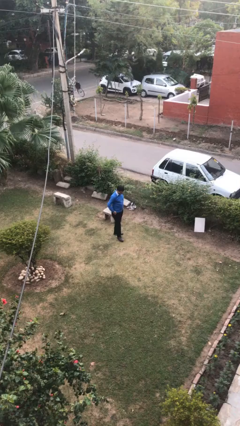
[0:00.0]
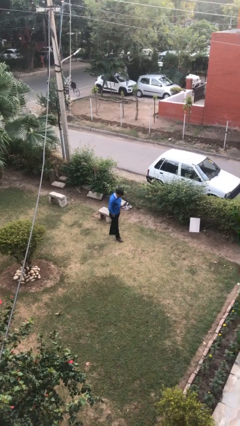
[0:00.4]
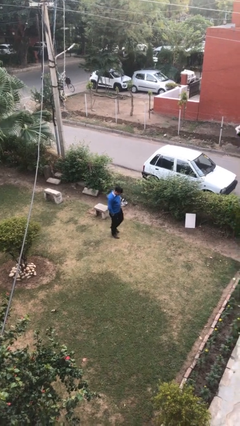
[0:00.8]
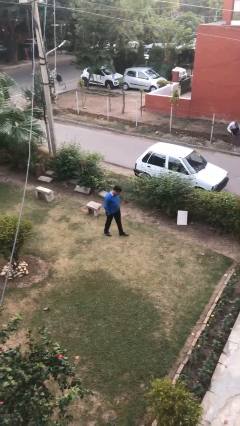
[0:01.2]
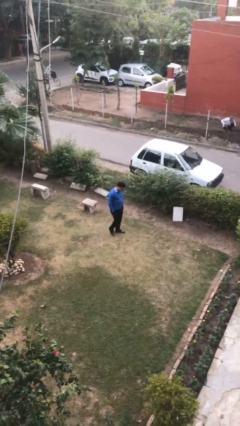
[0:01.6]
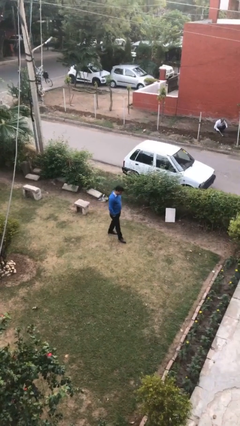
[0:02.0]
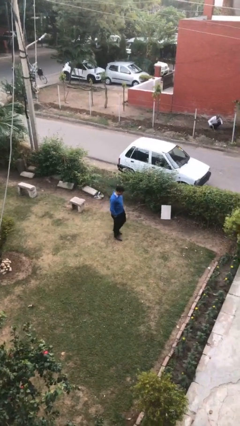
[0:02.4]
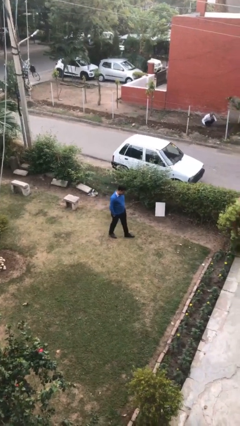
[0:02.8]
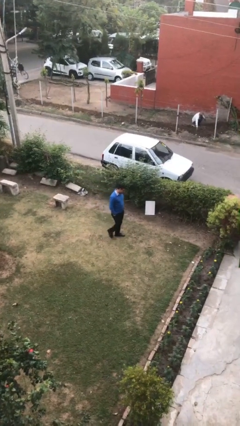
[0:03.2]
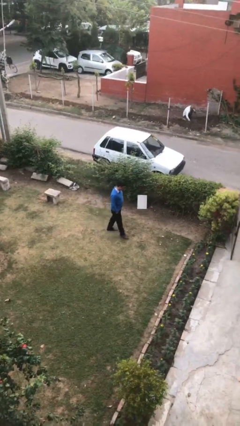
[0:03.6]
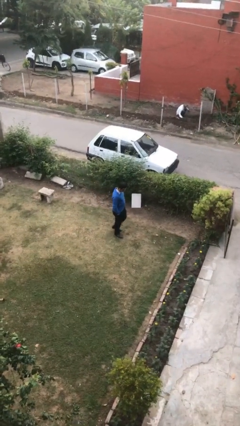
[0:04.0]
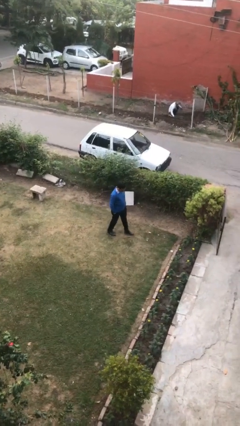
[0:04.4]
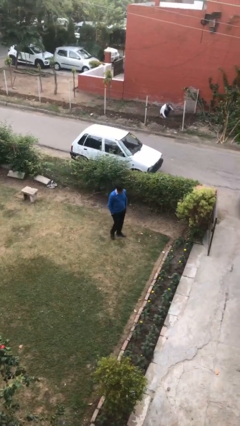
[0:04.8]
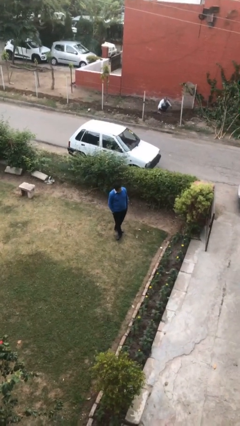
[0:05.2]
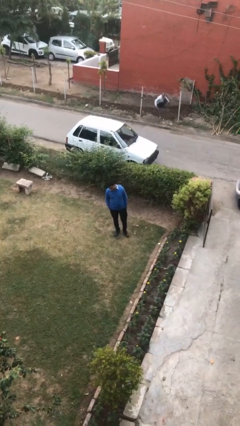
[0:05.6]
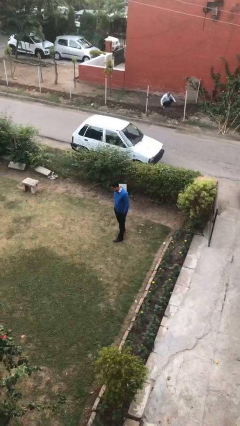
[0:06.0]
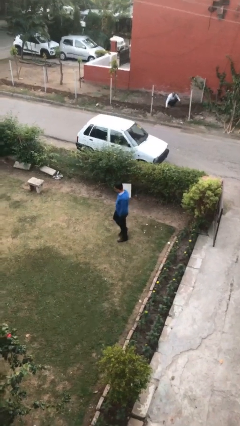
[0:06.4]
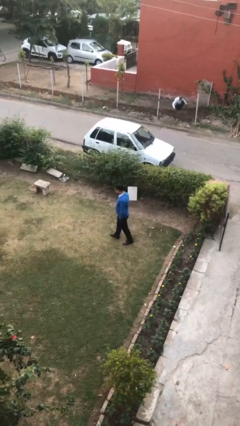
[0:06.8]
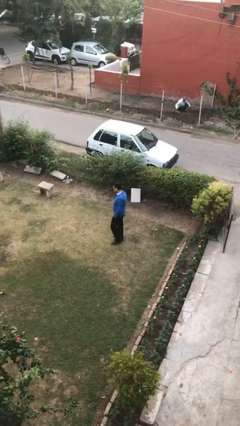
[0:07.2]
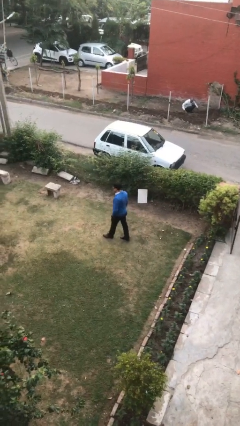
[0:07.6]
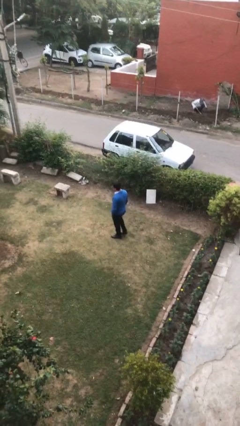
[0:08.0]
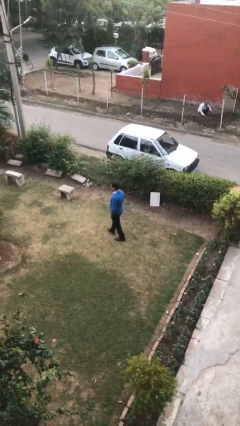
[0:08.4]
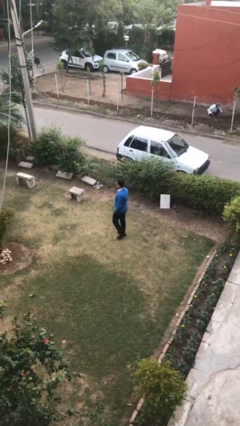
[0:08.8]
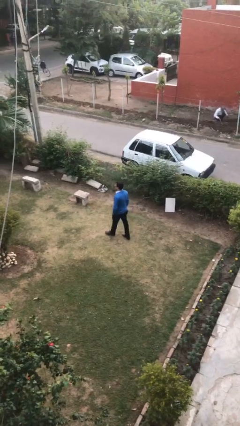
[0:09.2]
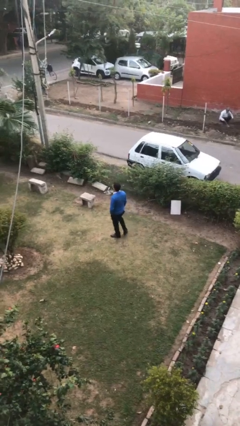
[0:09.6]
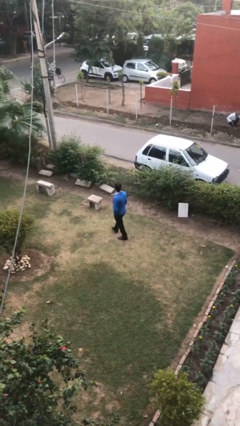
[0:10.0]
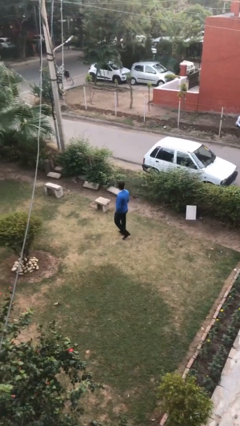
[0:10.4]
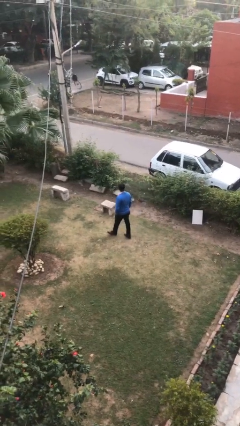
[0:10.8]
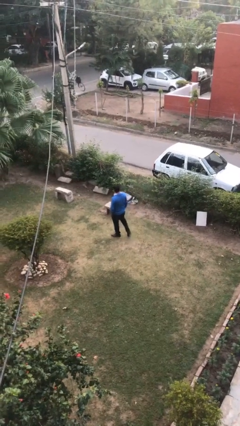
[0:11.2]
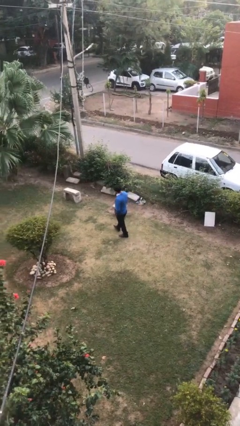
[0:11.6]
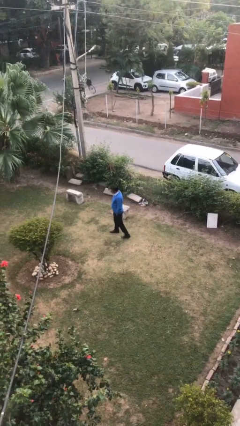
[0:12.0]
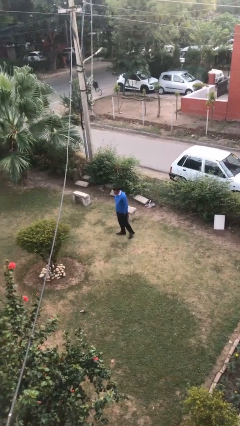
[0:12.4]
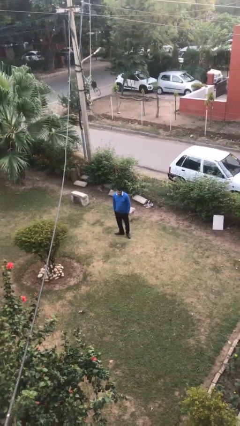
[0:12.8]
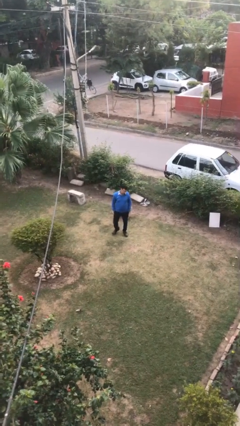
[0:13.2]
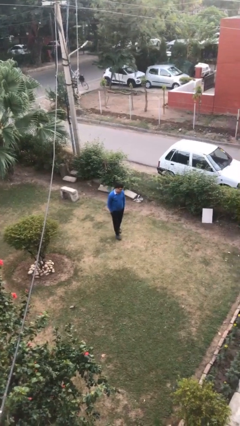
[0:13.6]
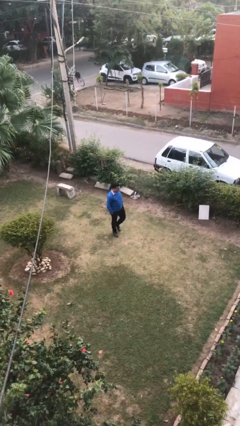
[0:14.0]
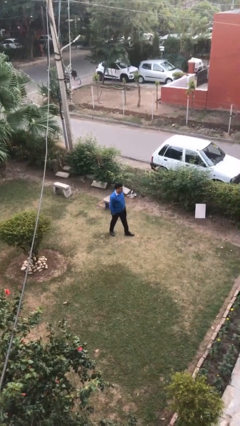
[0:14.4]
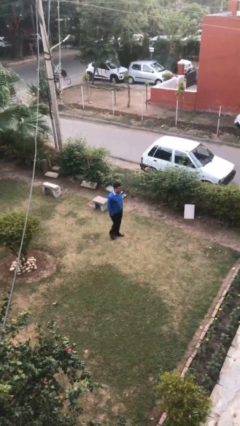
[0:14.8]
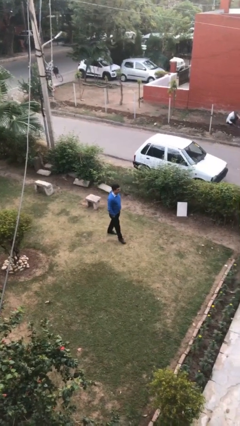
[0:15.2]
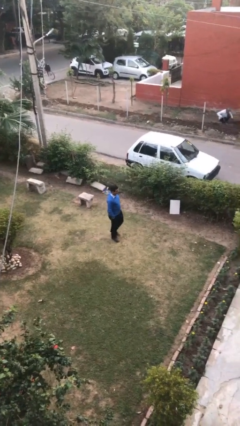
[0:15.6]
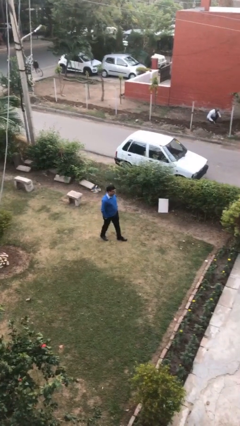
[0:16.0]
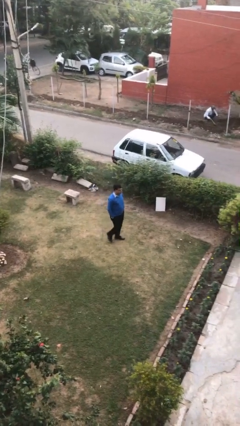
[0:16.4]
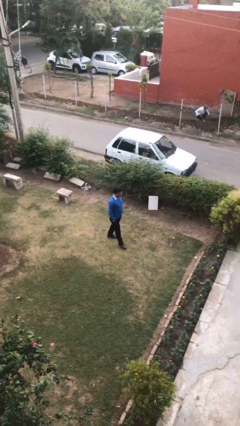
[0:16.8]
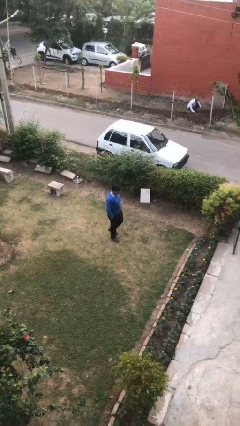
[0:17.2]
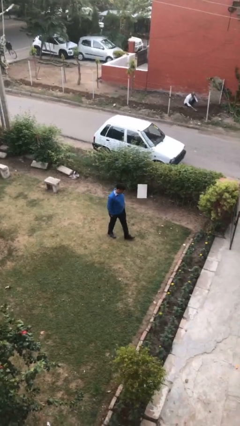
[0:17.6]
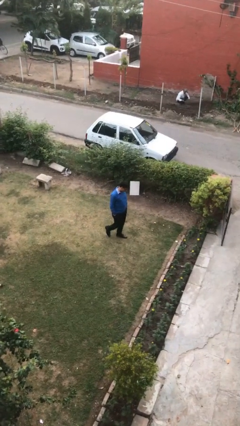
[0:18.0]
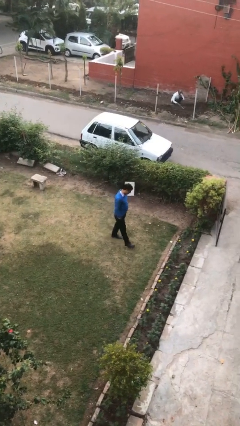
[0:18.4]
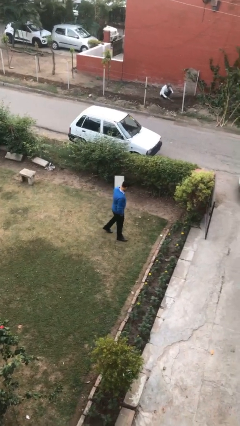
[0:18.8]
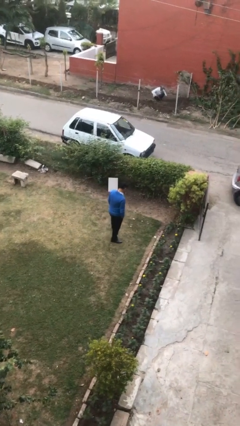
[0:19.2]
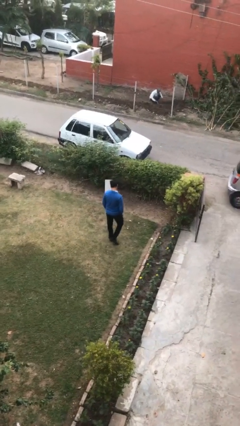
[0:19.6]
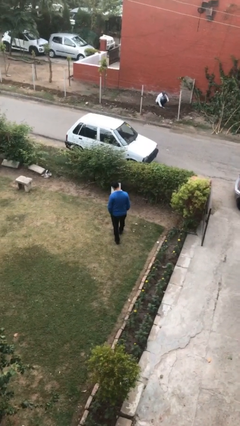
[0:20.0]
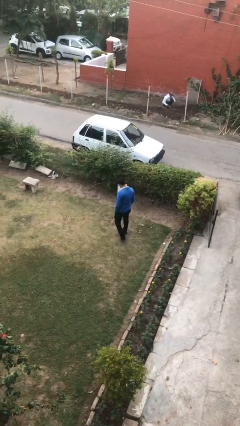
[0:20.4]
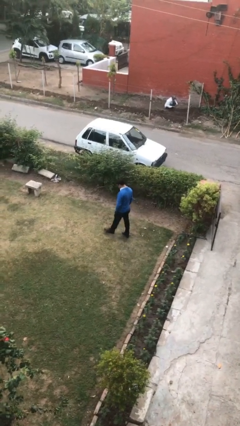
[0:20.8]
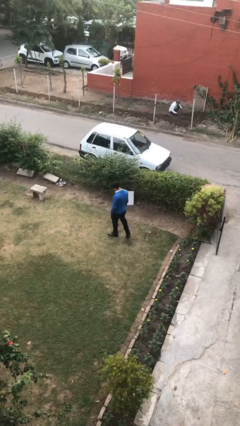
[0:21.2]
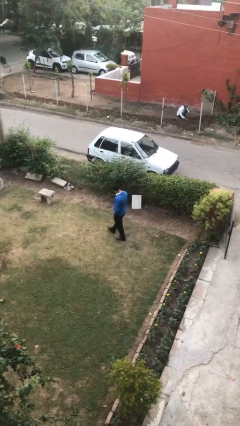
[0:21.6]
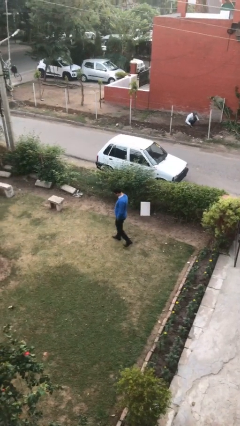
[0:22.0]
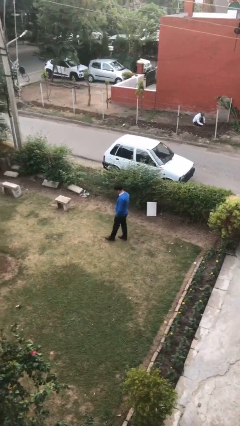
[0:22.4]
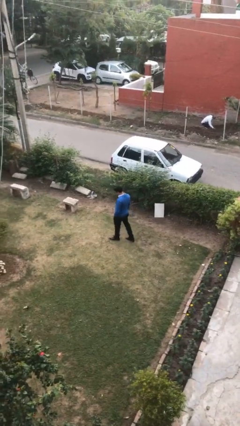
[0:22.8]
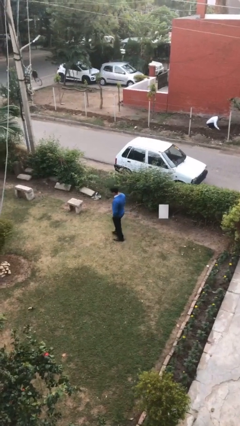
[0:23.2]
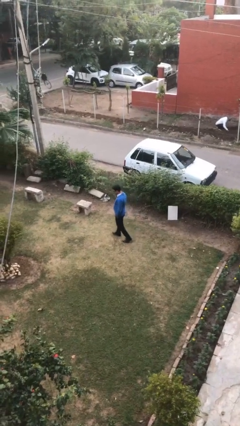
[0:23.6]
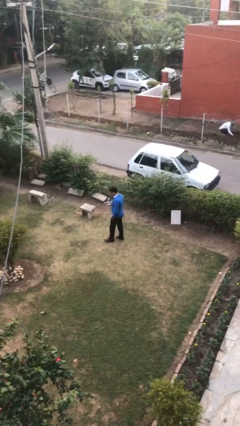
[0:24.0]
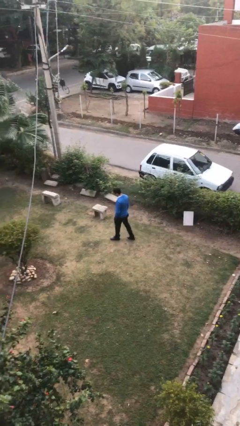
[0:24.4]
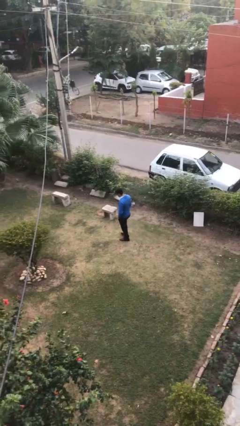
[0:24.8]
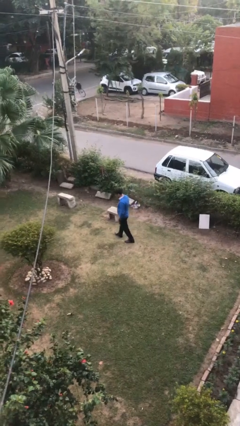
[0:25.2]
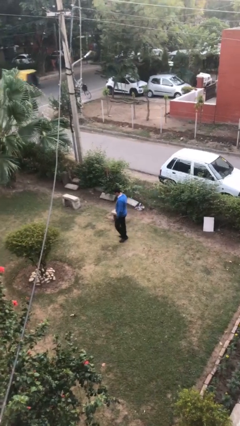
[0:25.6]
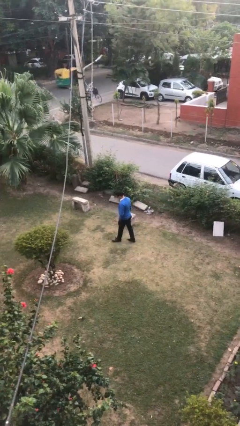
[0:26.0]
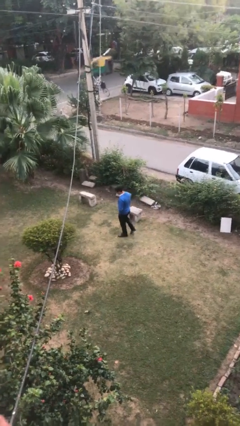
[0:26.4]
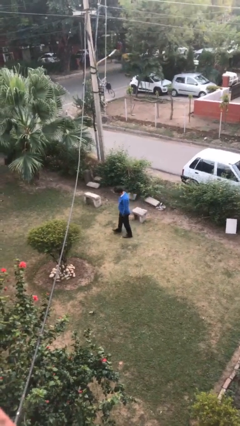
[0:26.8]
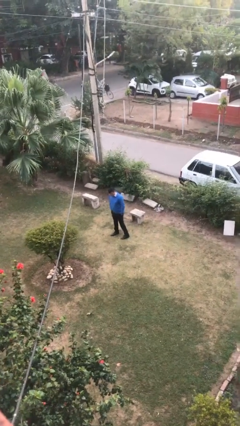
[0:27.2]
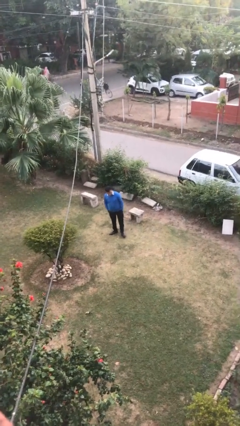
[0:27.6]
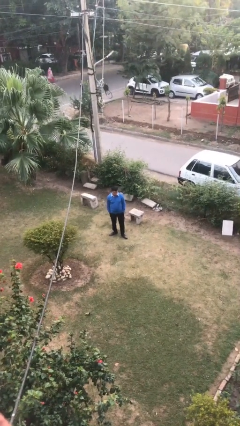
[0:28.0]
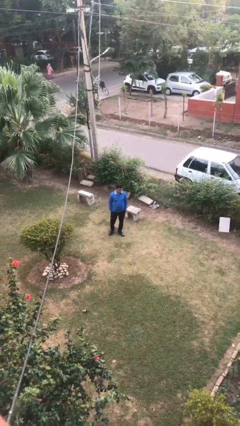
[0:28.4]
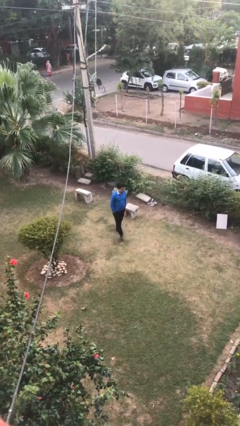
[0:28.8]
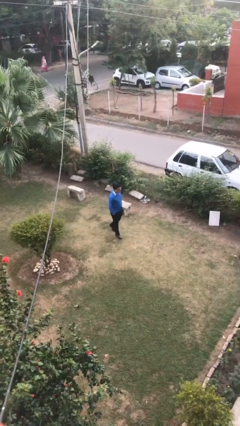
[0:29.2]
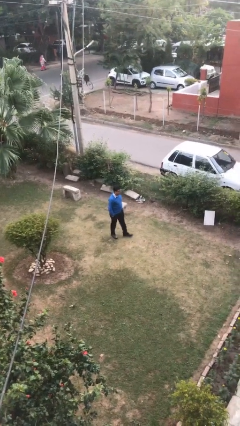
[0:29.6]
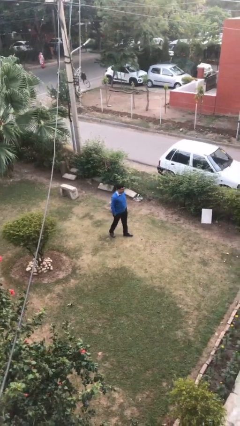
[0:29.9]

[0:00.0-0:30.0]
person walks

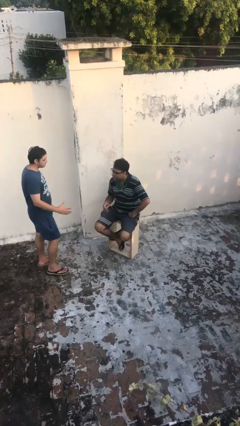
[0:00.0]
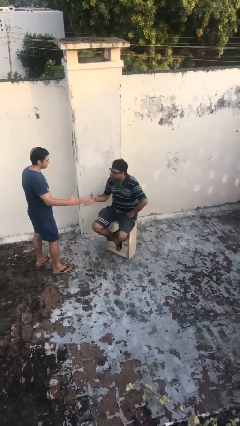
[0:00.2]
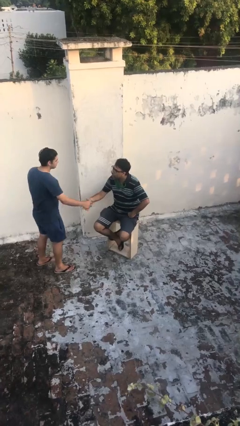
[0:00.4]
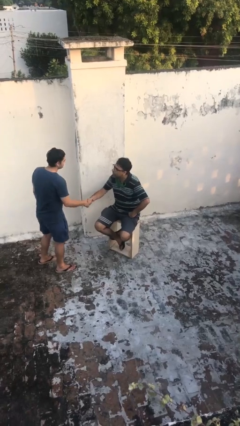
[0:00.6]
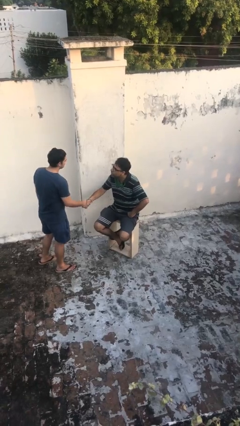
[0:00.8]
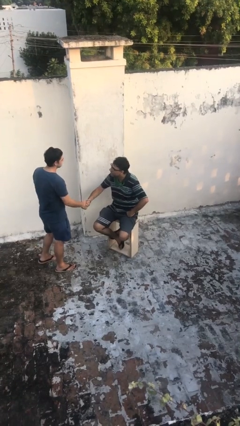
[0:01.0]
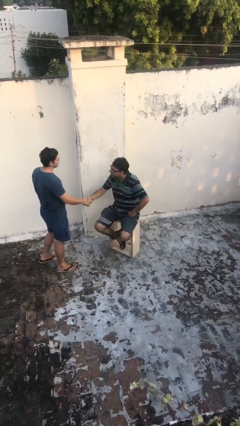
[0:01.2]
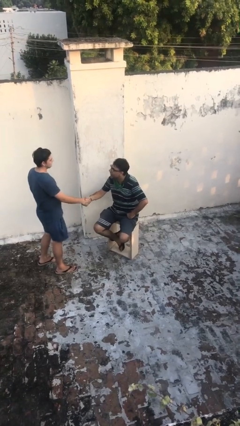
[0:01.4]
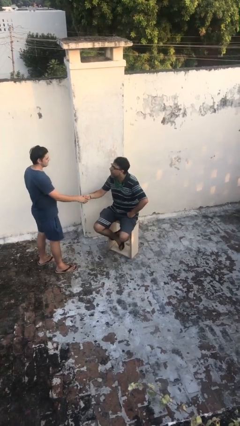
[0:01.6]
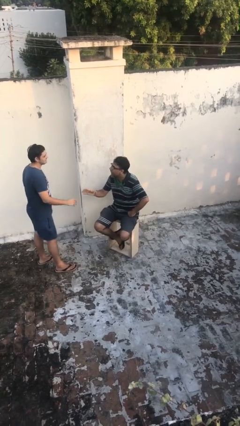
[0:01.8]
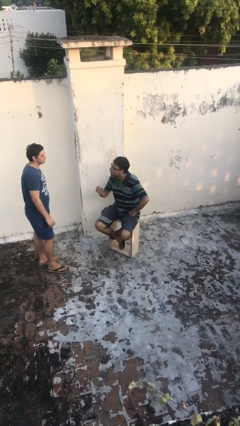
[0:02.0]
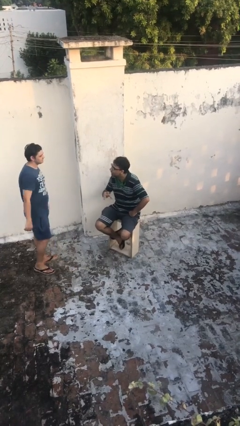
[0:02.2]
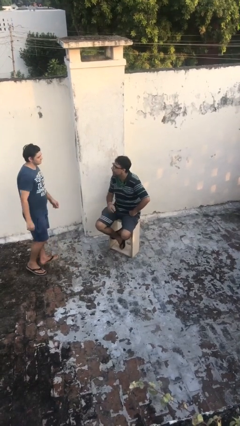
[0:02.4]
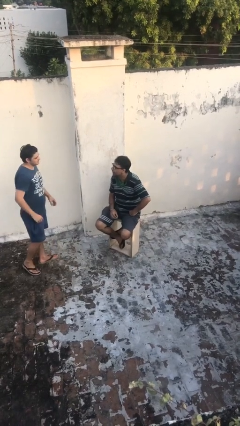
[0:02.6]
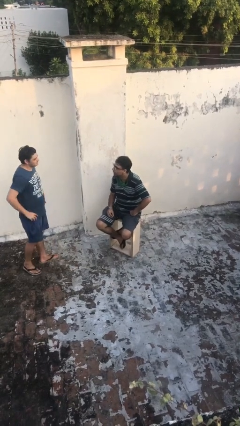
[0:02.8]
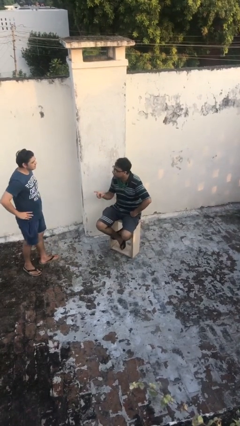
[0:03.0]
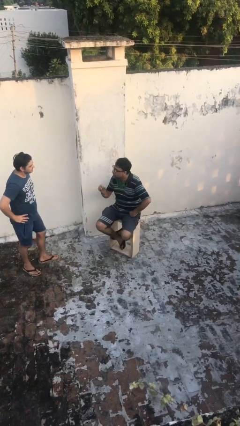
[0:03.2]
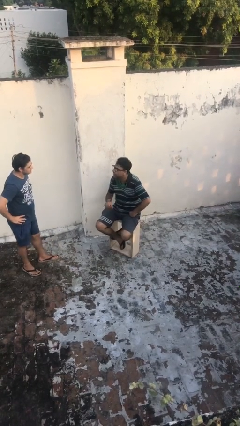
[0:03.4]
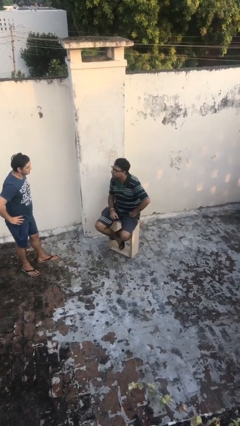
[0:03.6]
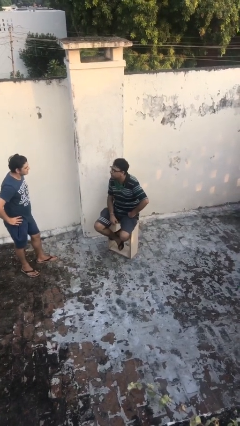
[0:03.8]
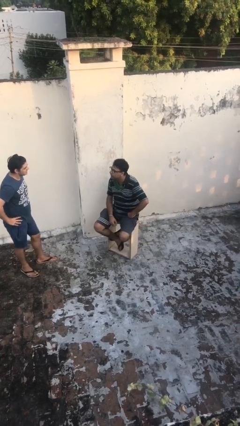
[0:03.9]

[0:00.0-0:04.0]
person shakes hand
